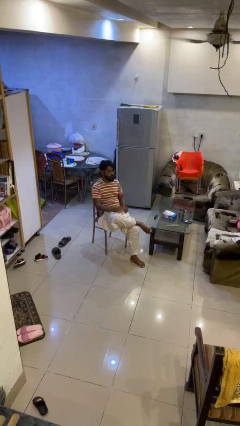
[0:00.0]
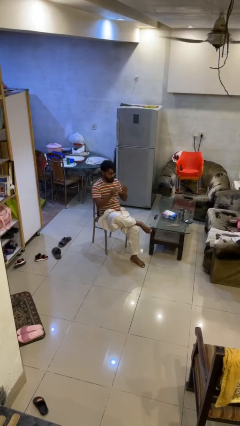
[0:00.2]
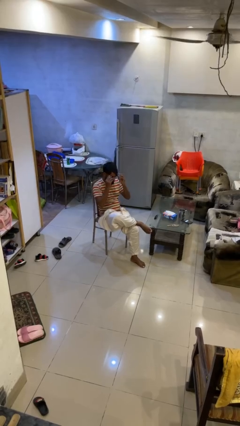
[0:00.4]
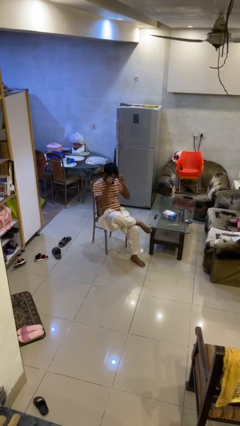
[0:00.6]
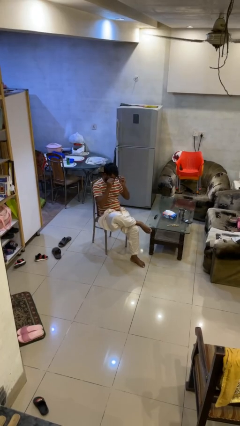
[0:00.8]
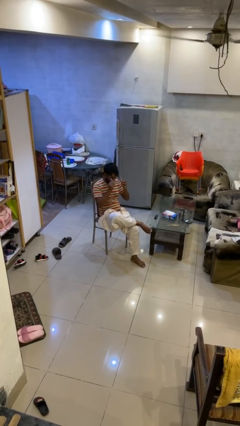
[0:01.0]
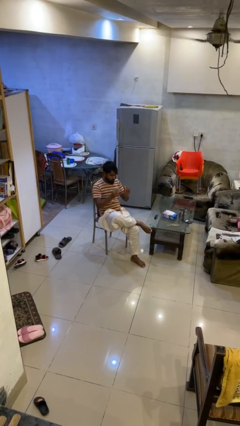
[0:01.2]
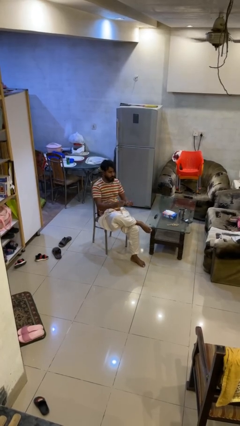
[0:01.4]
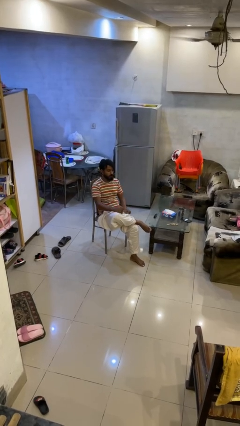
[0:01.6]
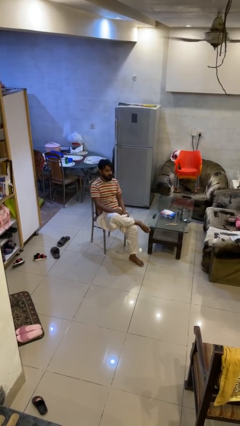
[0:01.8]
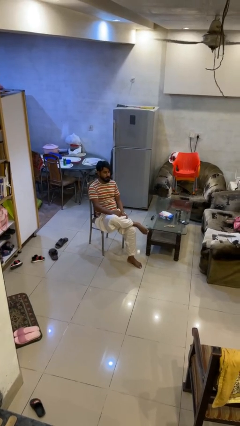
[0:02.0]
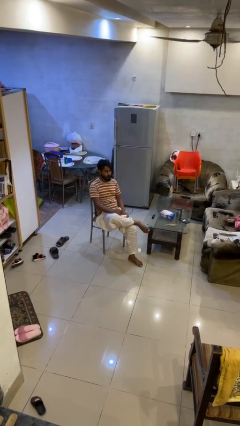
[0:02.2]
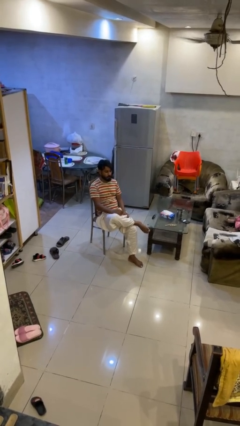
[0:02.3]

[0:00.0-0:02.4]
person takes off glasses

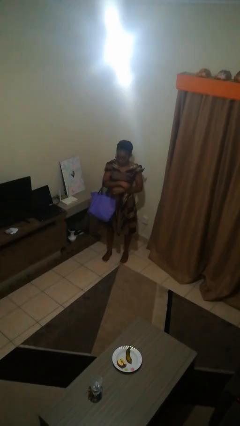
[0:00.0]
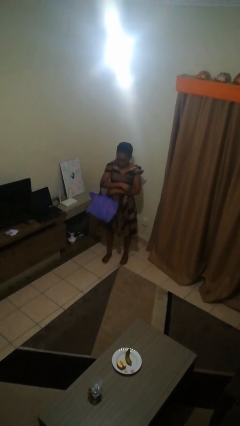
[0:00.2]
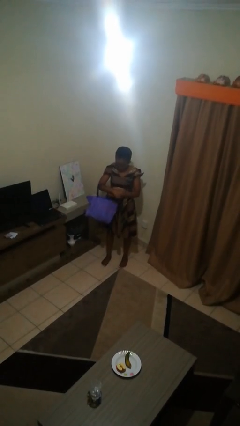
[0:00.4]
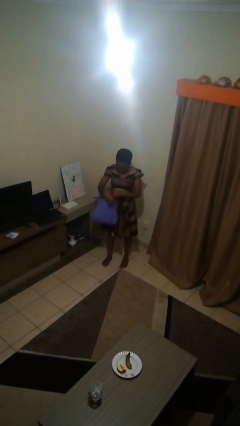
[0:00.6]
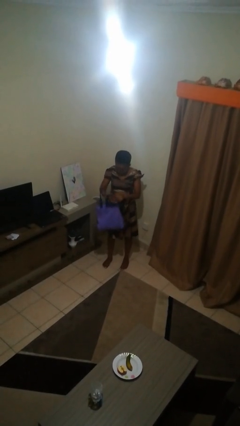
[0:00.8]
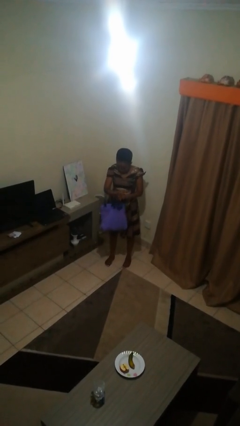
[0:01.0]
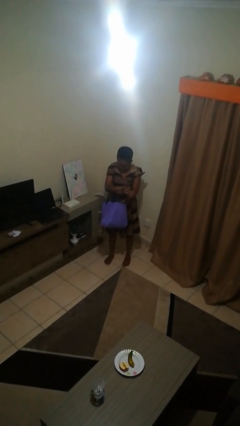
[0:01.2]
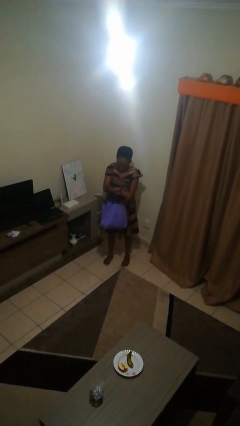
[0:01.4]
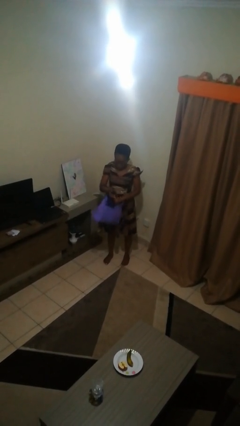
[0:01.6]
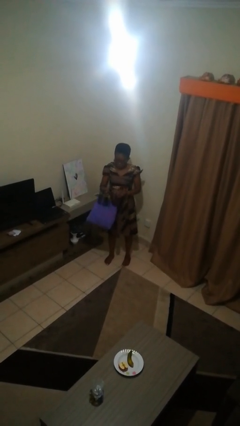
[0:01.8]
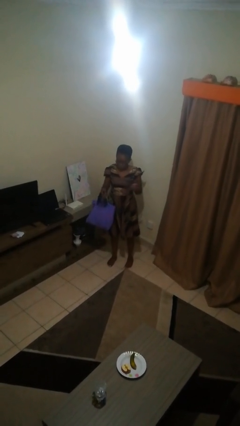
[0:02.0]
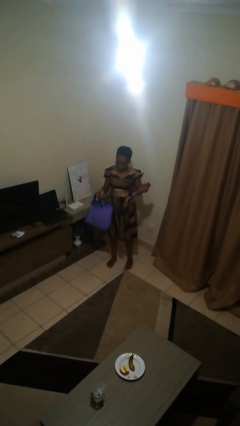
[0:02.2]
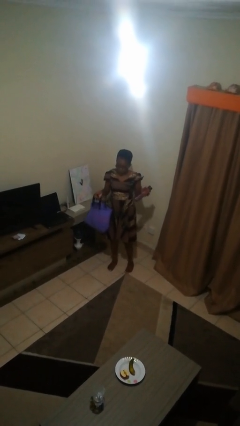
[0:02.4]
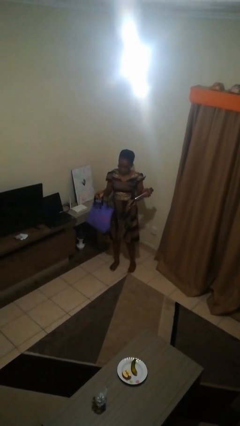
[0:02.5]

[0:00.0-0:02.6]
person takes object from bag

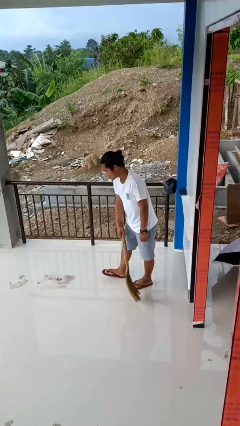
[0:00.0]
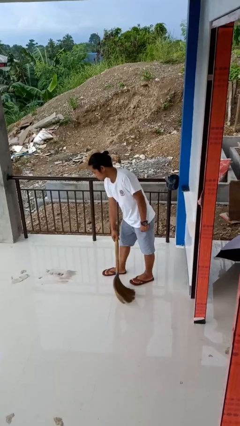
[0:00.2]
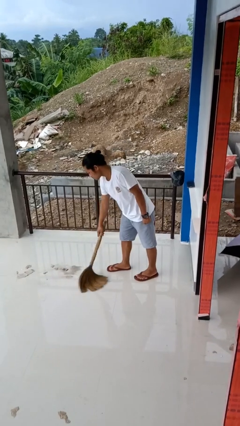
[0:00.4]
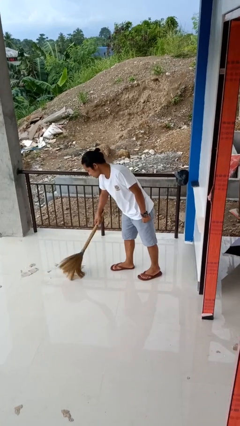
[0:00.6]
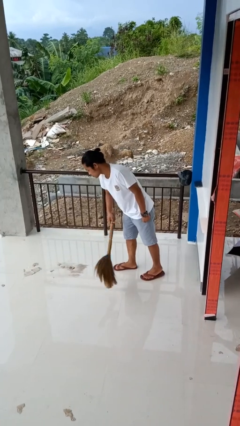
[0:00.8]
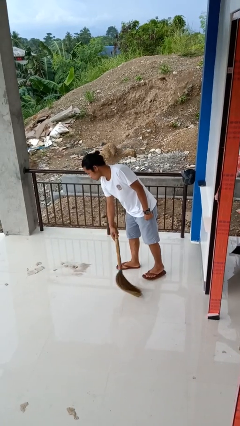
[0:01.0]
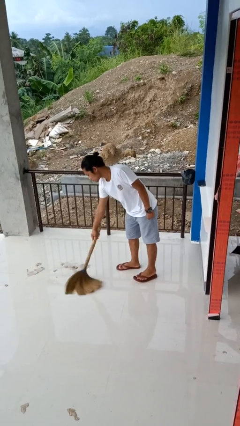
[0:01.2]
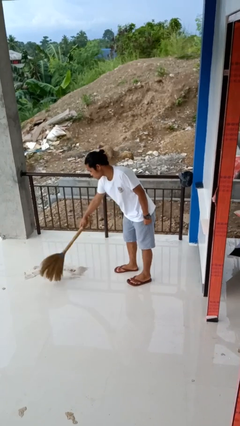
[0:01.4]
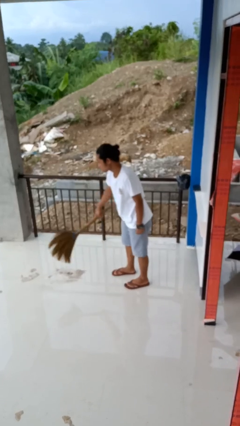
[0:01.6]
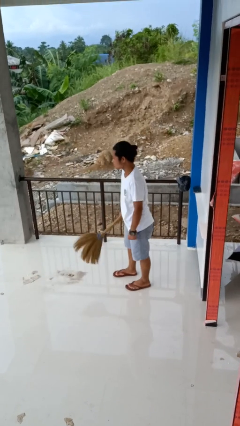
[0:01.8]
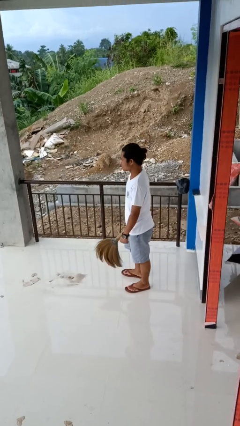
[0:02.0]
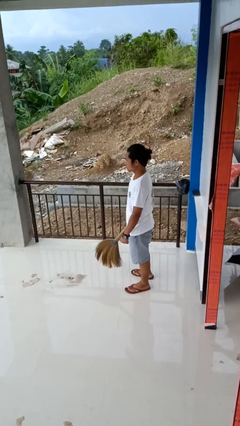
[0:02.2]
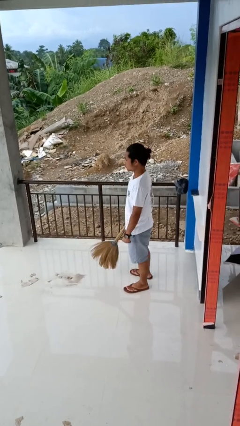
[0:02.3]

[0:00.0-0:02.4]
person sweeps floor

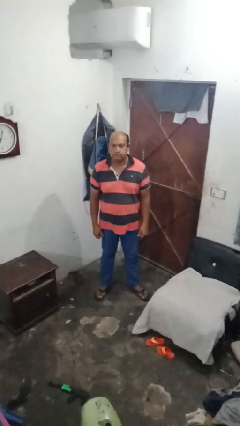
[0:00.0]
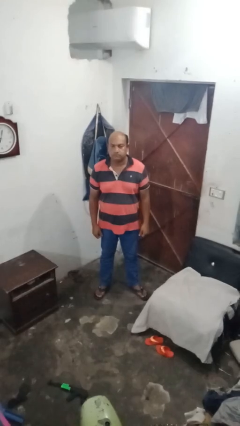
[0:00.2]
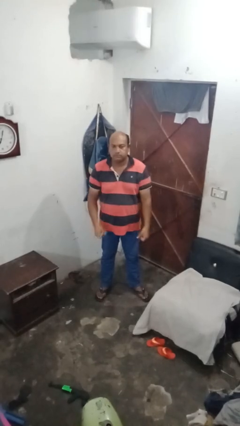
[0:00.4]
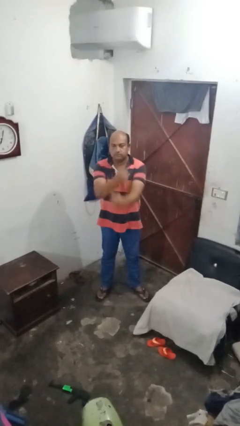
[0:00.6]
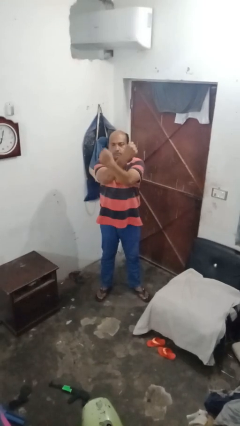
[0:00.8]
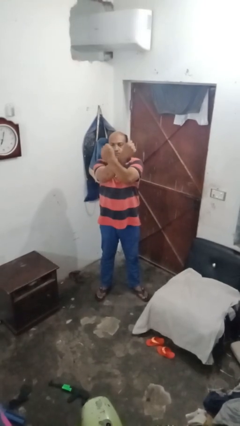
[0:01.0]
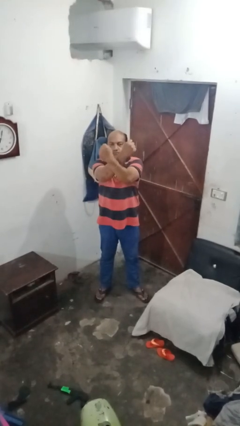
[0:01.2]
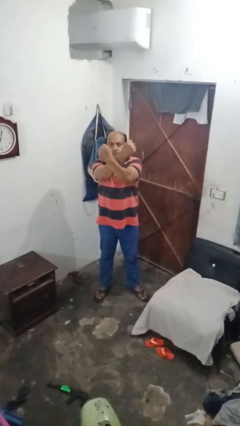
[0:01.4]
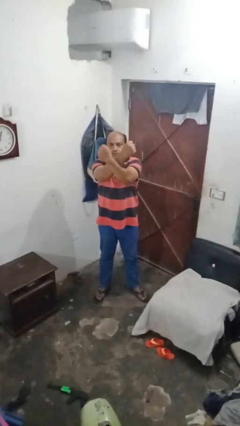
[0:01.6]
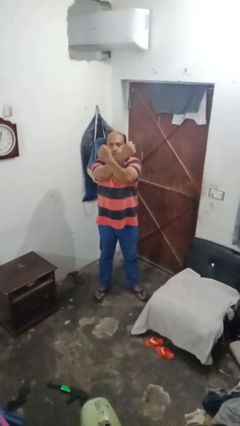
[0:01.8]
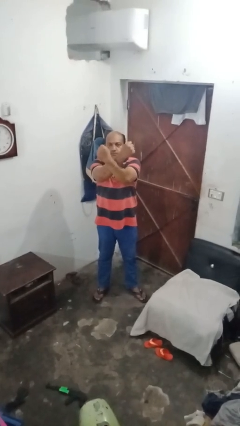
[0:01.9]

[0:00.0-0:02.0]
person gestures arms x

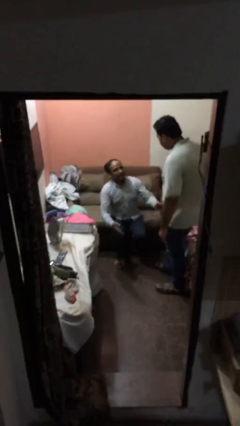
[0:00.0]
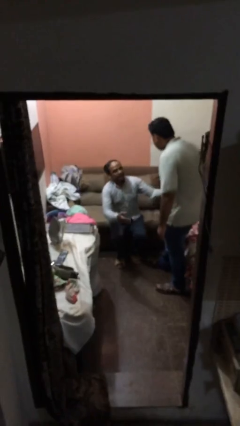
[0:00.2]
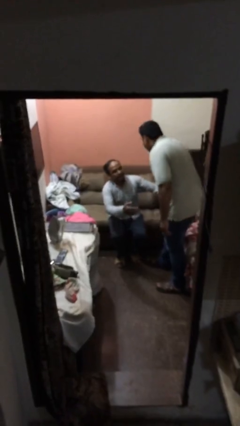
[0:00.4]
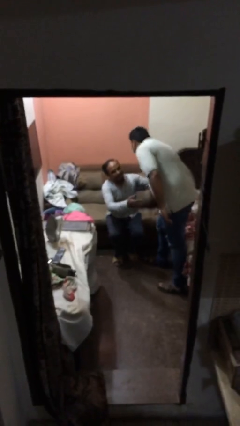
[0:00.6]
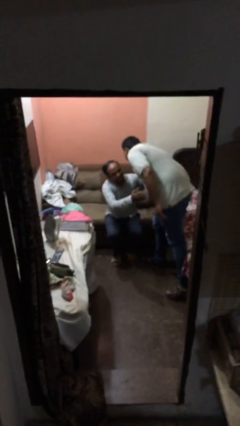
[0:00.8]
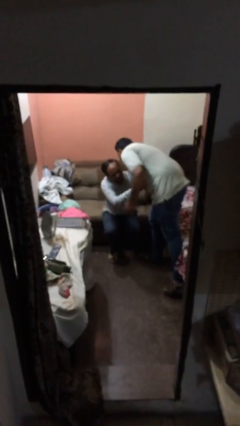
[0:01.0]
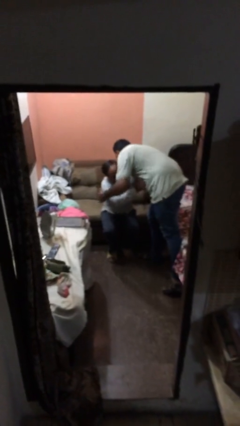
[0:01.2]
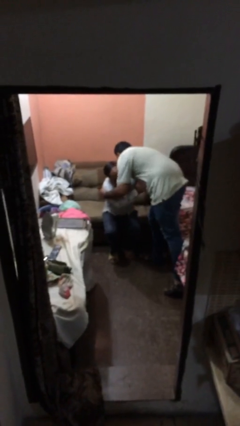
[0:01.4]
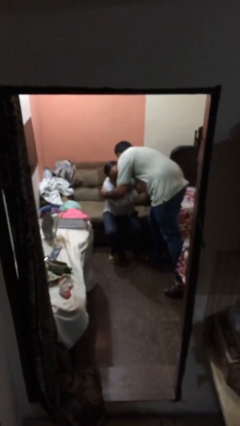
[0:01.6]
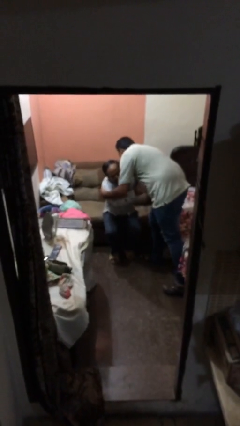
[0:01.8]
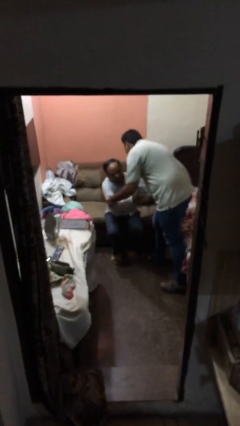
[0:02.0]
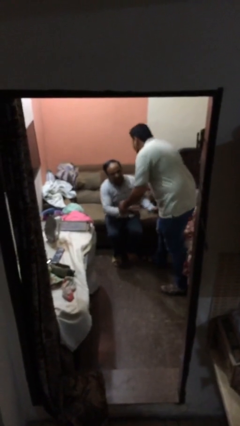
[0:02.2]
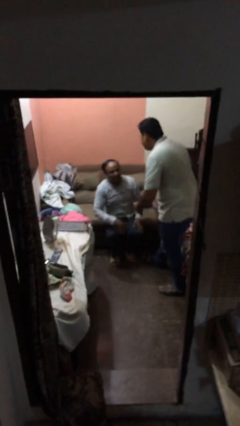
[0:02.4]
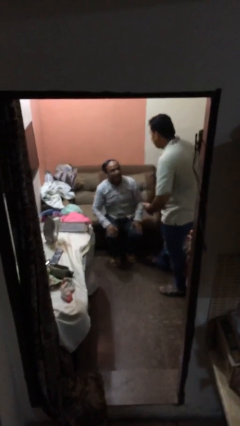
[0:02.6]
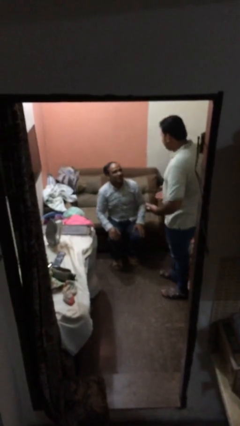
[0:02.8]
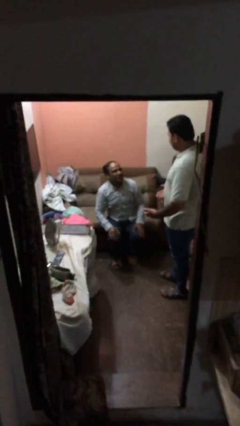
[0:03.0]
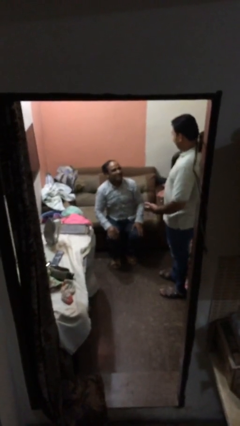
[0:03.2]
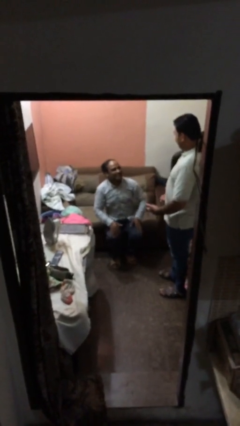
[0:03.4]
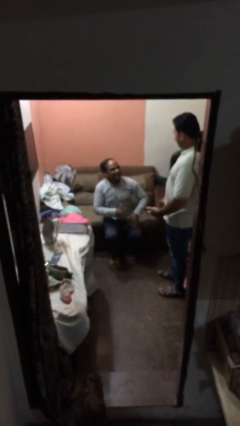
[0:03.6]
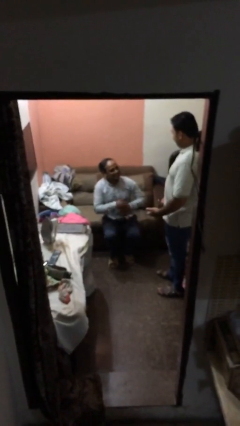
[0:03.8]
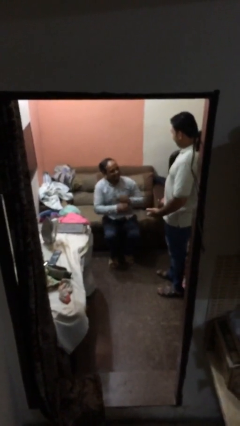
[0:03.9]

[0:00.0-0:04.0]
person embraces person

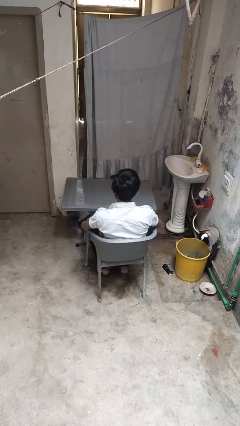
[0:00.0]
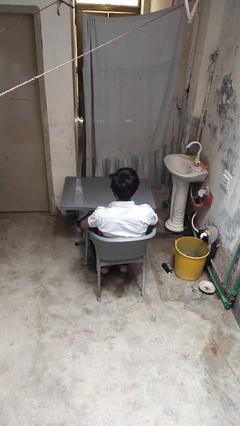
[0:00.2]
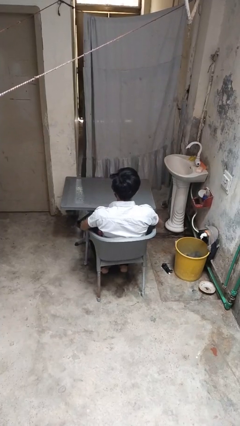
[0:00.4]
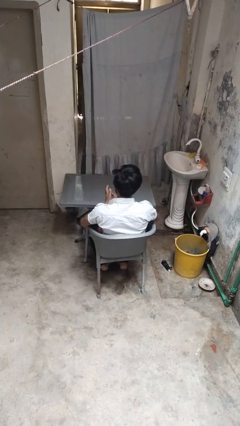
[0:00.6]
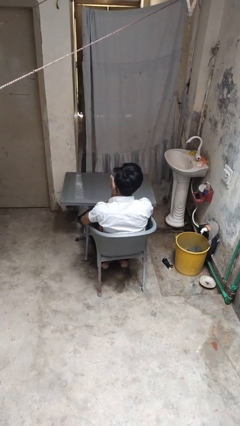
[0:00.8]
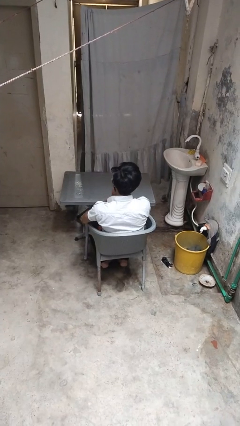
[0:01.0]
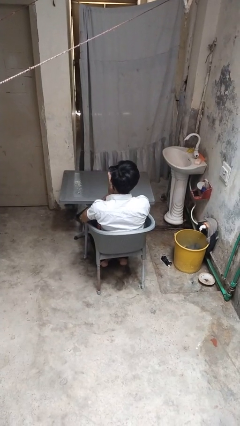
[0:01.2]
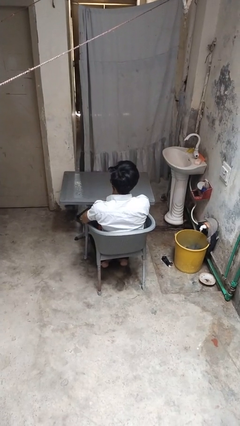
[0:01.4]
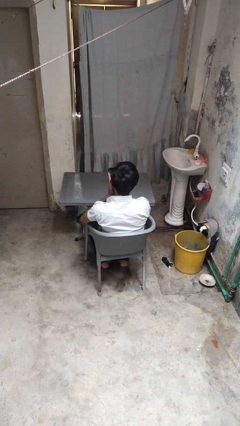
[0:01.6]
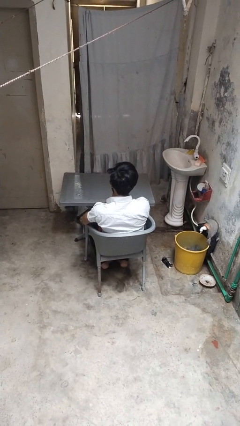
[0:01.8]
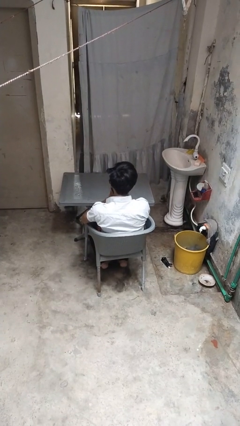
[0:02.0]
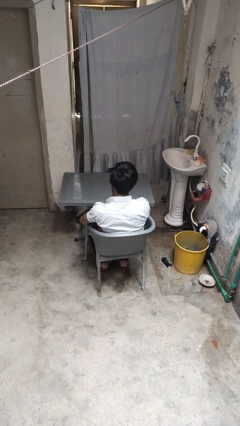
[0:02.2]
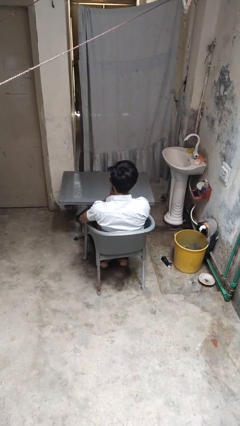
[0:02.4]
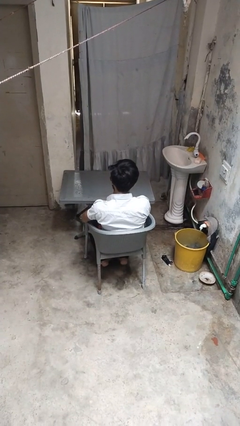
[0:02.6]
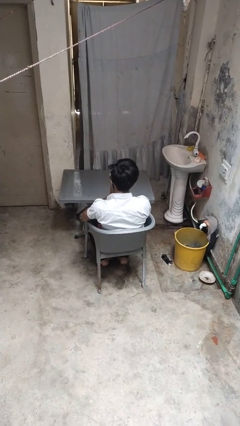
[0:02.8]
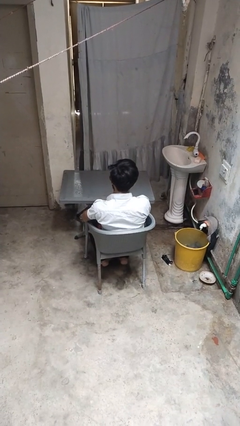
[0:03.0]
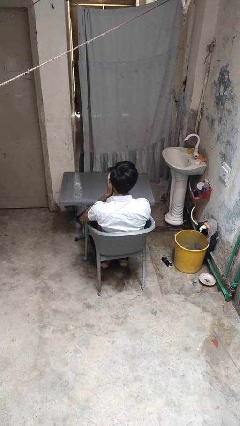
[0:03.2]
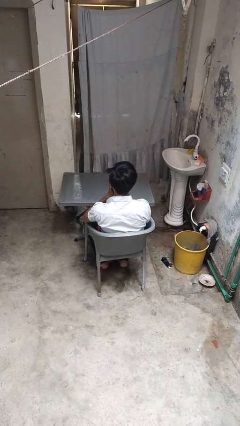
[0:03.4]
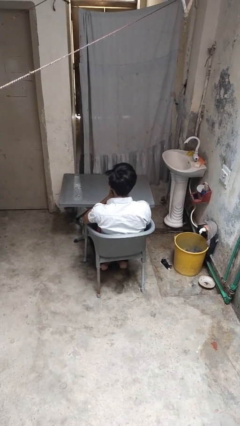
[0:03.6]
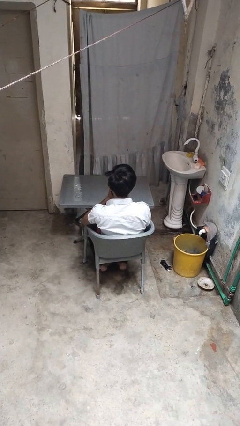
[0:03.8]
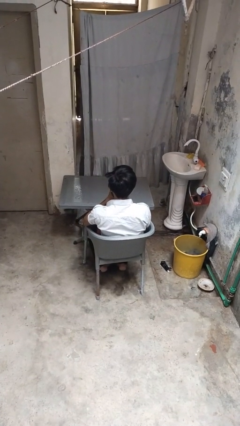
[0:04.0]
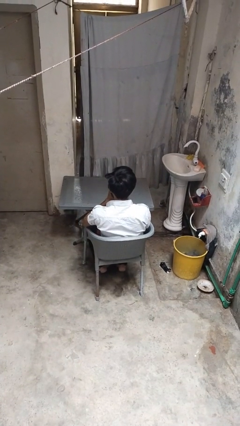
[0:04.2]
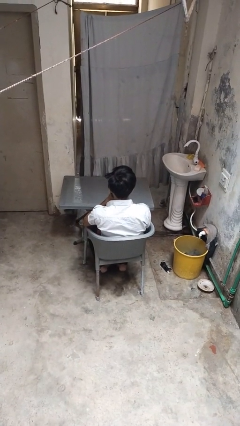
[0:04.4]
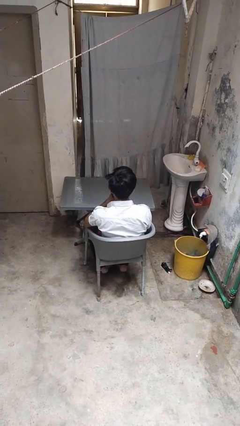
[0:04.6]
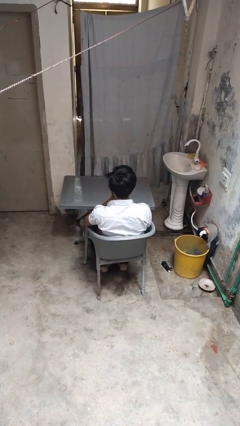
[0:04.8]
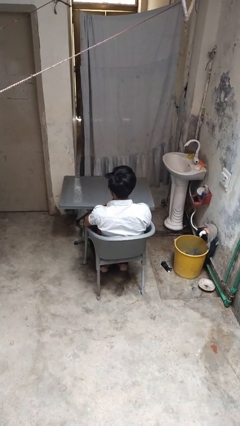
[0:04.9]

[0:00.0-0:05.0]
person blows into hands
